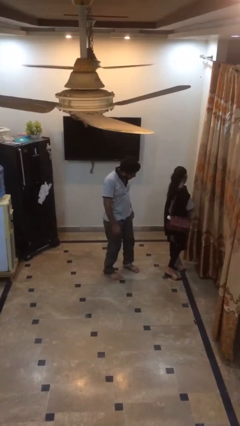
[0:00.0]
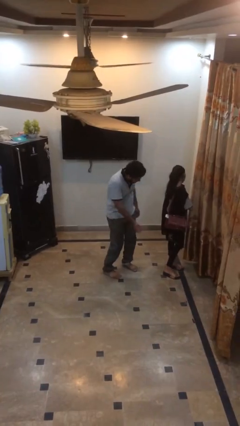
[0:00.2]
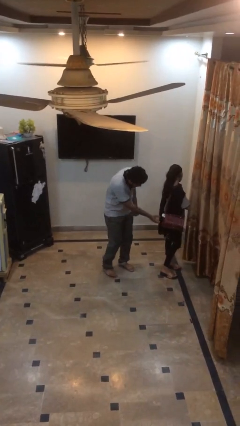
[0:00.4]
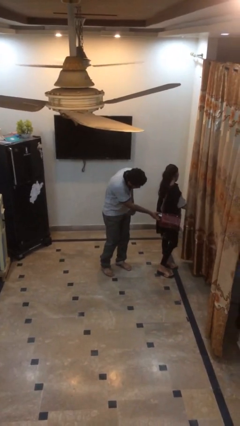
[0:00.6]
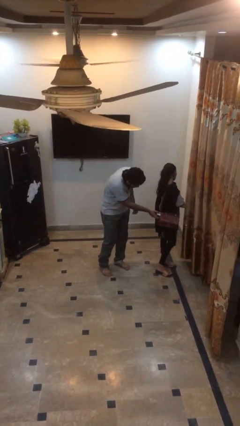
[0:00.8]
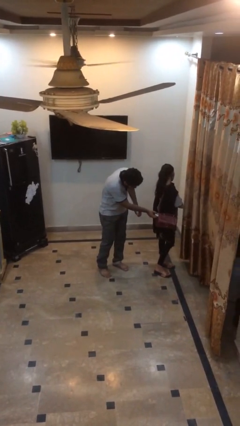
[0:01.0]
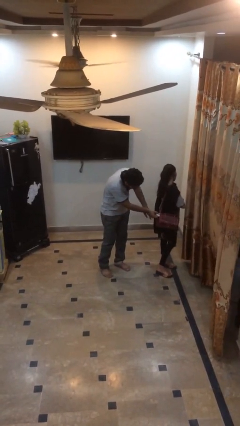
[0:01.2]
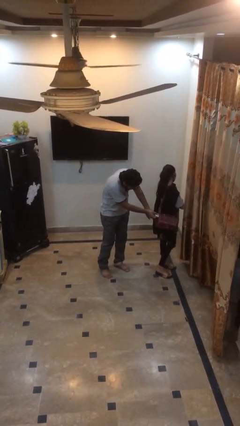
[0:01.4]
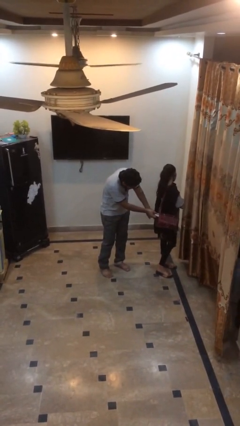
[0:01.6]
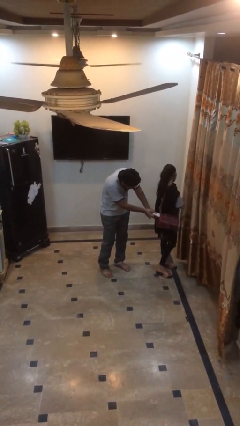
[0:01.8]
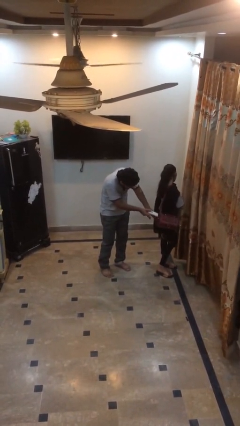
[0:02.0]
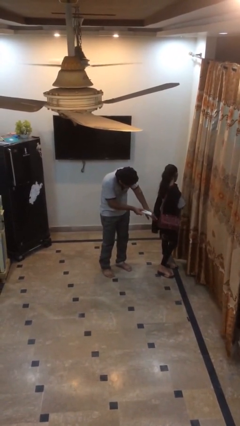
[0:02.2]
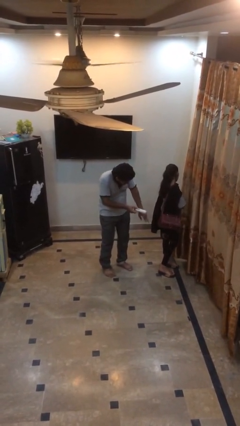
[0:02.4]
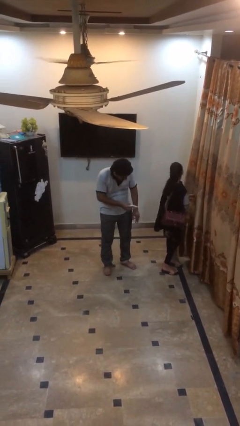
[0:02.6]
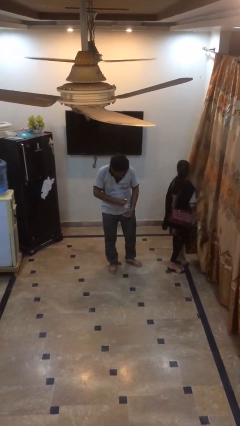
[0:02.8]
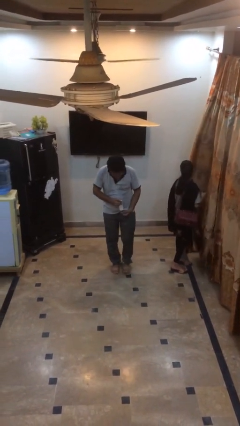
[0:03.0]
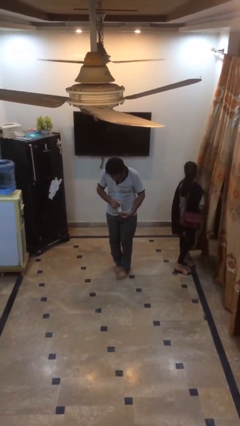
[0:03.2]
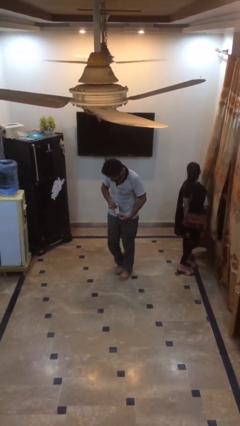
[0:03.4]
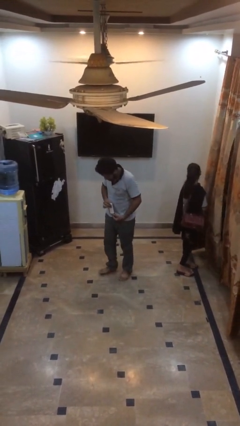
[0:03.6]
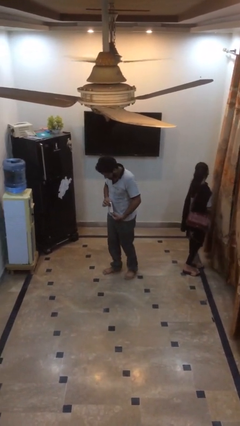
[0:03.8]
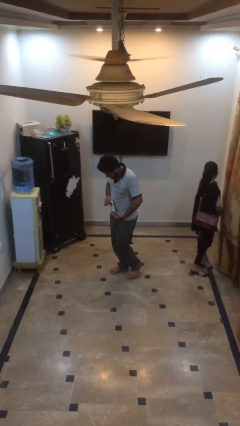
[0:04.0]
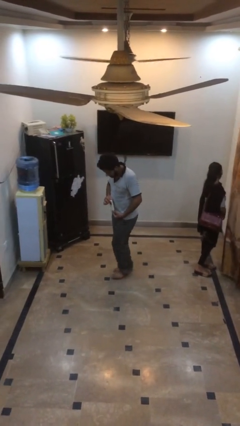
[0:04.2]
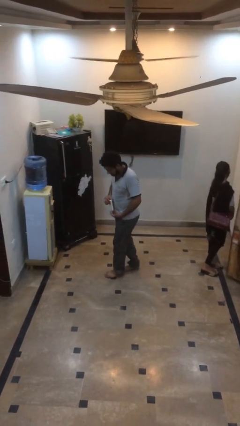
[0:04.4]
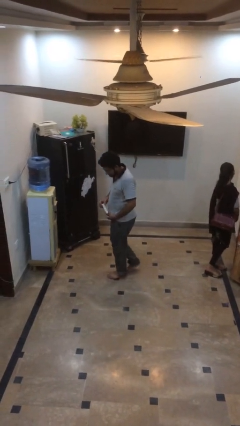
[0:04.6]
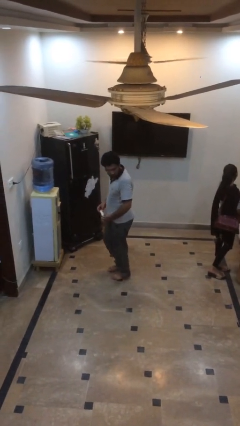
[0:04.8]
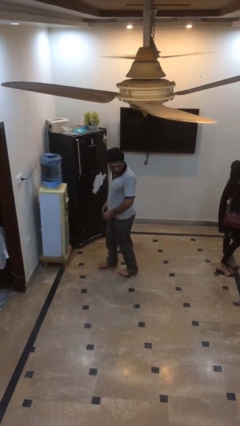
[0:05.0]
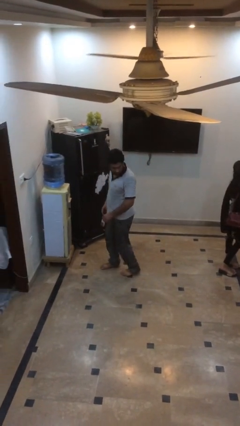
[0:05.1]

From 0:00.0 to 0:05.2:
person steals object from person

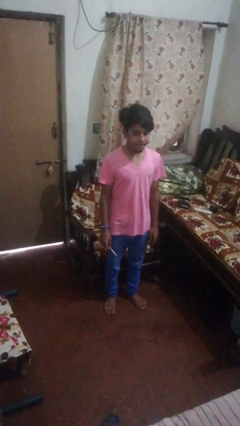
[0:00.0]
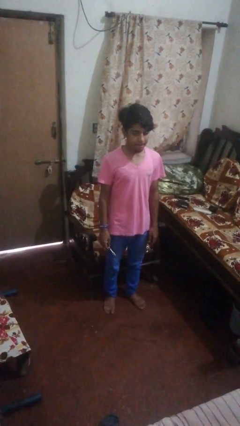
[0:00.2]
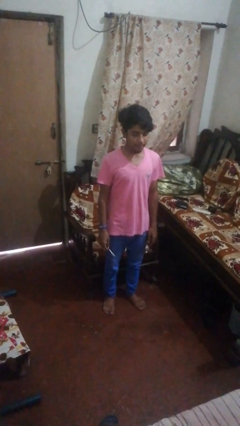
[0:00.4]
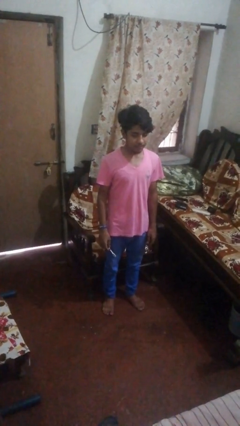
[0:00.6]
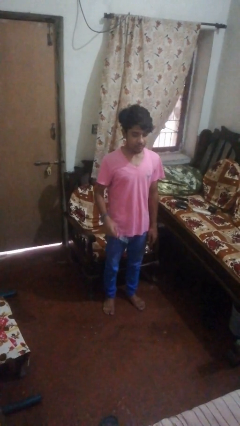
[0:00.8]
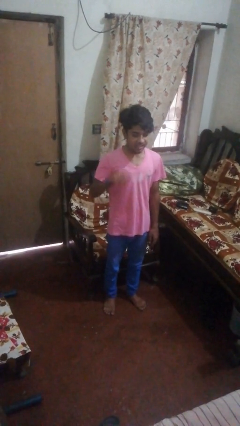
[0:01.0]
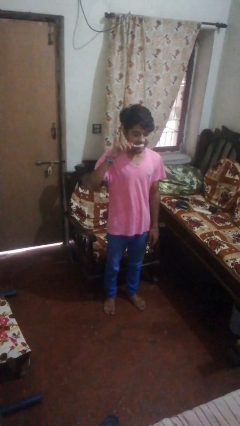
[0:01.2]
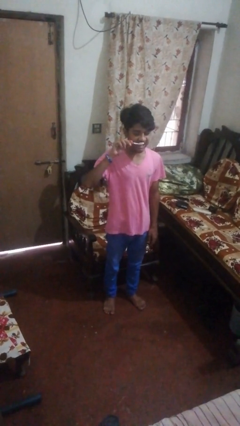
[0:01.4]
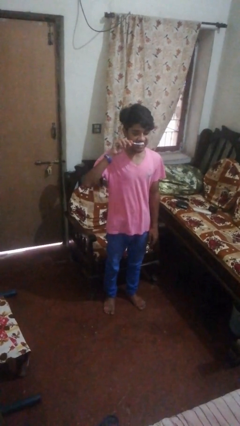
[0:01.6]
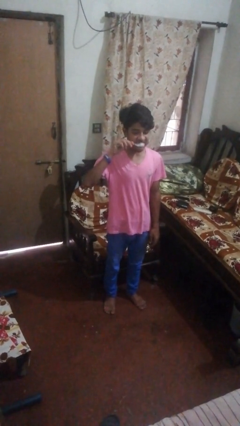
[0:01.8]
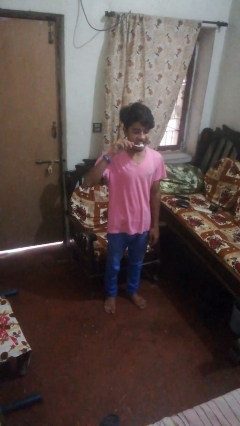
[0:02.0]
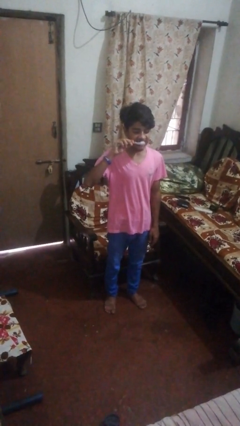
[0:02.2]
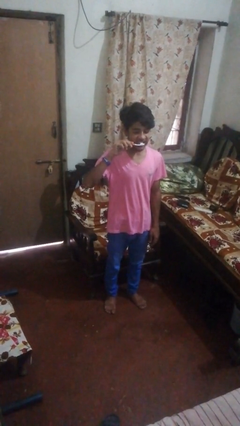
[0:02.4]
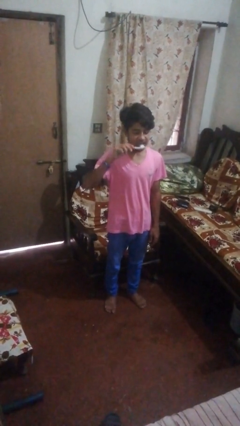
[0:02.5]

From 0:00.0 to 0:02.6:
person brushes teeth

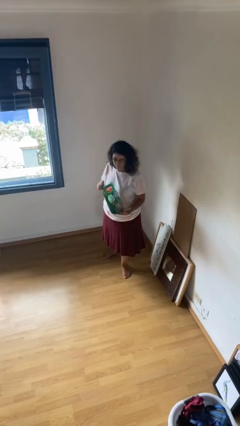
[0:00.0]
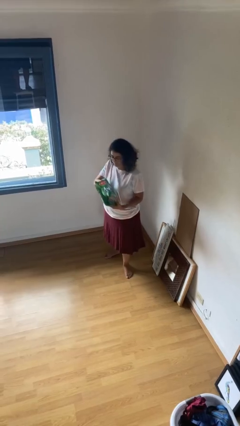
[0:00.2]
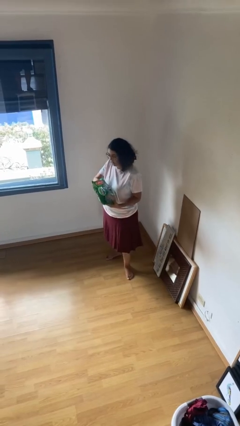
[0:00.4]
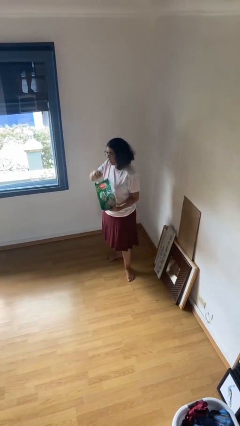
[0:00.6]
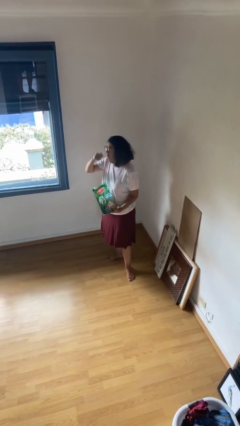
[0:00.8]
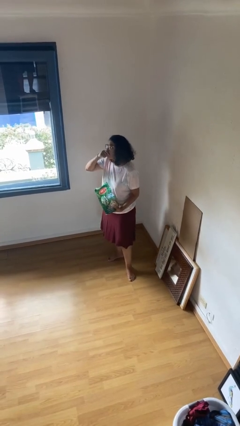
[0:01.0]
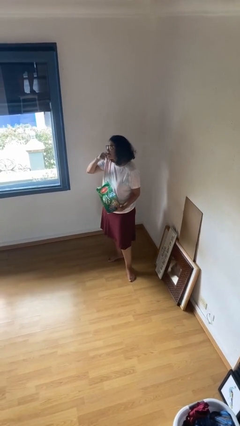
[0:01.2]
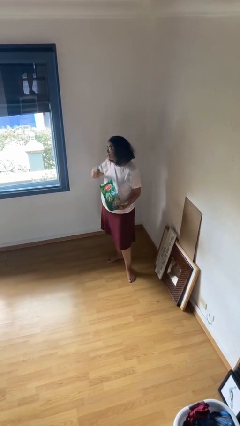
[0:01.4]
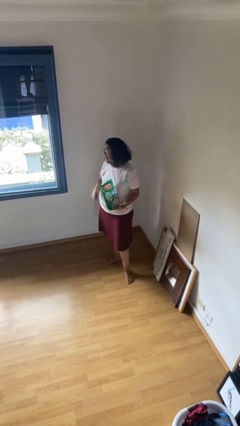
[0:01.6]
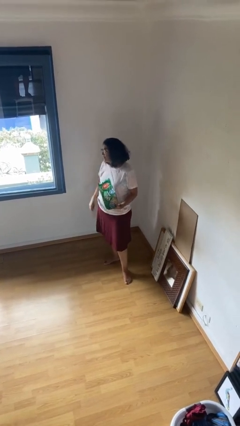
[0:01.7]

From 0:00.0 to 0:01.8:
person eats snack from bag

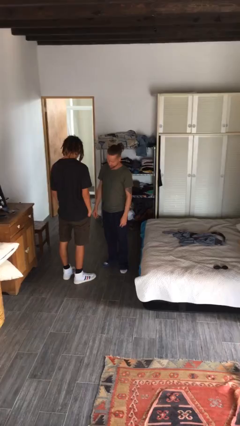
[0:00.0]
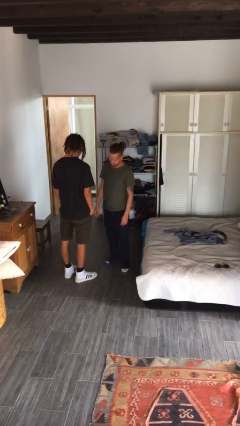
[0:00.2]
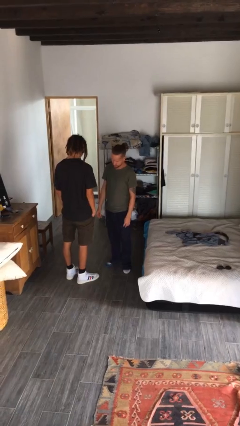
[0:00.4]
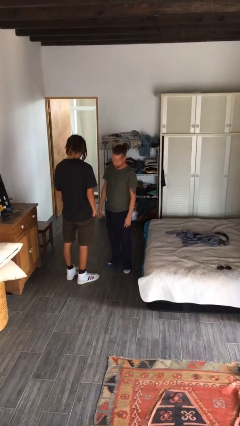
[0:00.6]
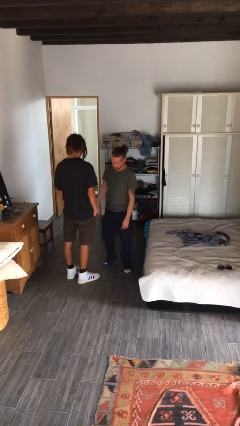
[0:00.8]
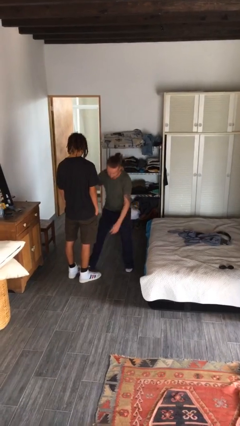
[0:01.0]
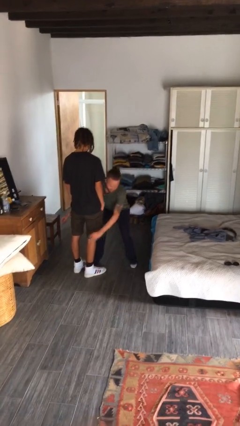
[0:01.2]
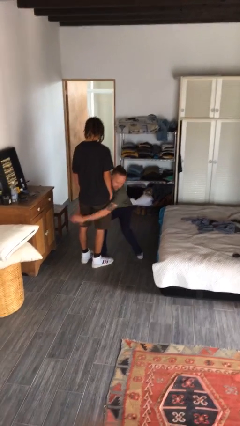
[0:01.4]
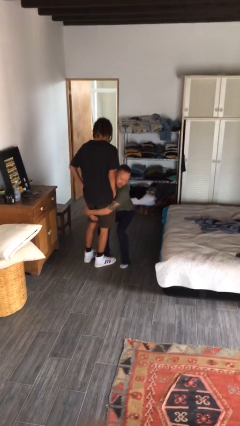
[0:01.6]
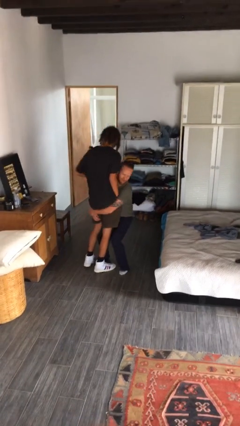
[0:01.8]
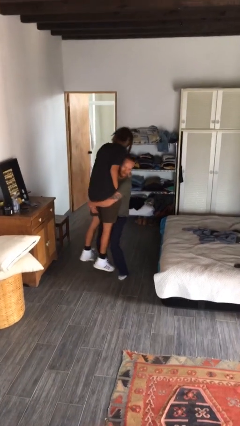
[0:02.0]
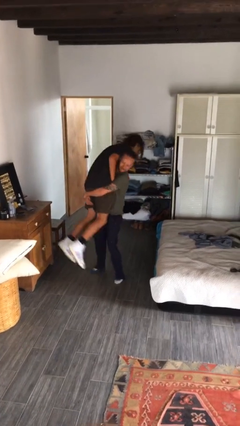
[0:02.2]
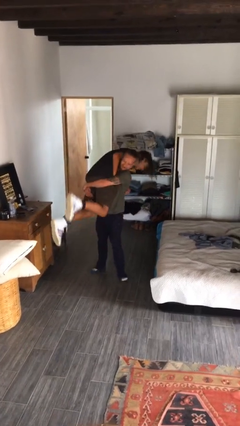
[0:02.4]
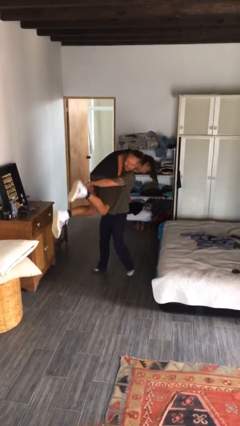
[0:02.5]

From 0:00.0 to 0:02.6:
person picks up person

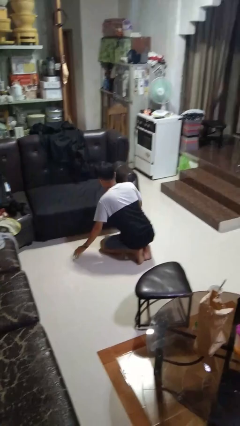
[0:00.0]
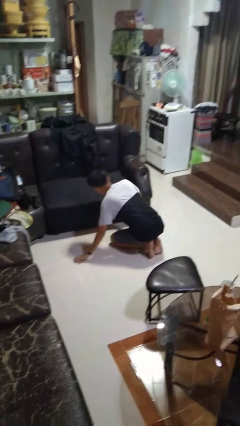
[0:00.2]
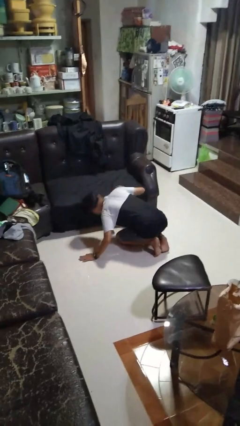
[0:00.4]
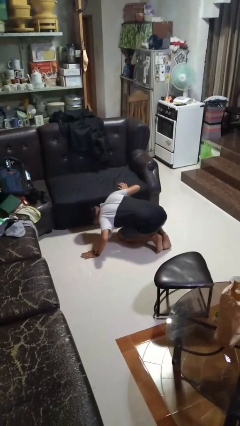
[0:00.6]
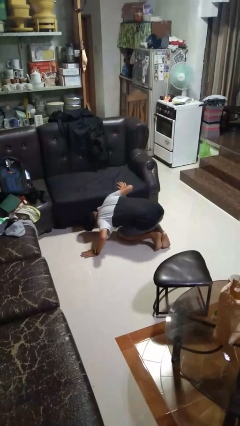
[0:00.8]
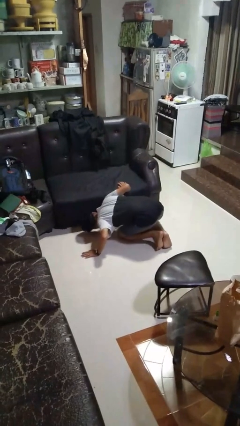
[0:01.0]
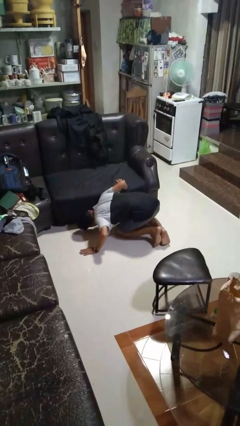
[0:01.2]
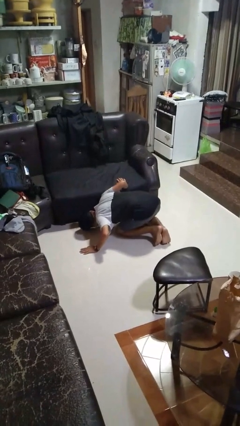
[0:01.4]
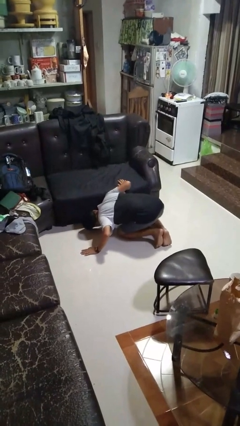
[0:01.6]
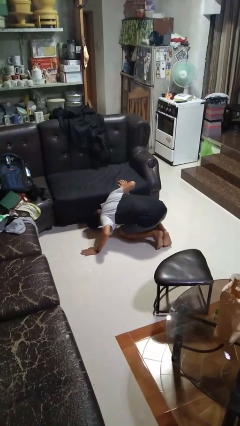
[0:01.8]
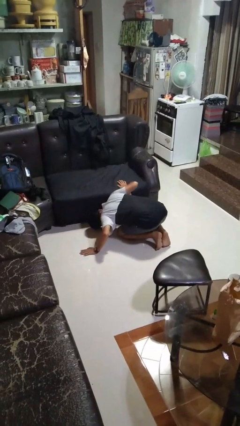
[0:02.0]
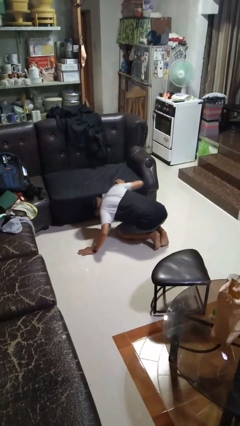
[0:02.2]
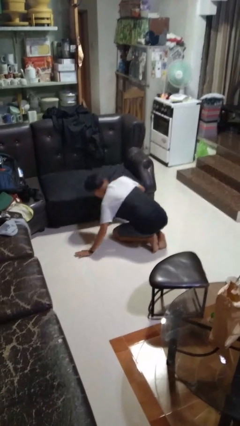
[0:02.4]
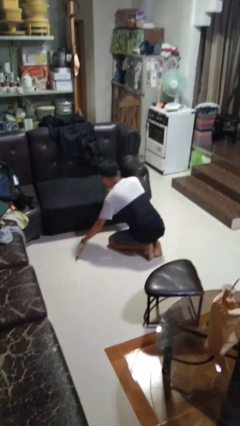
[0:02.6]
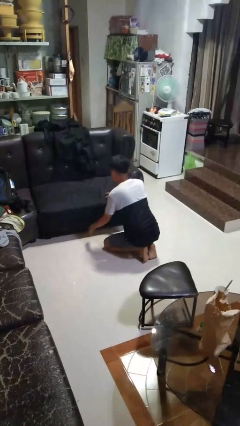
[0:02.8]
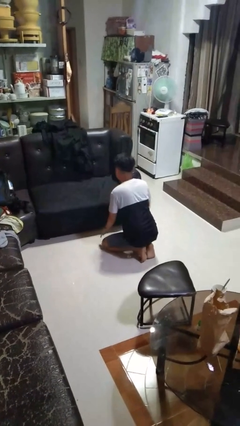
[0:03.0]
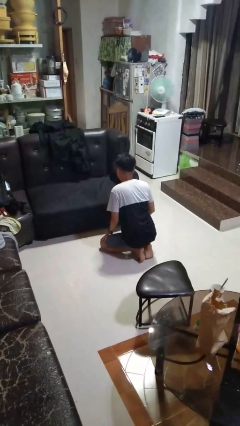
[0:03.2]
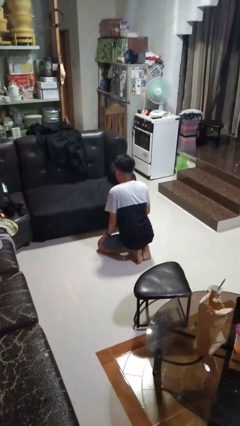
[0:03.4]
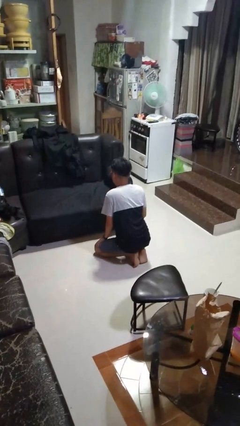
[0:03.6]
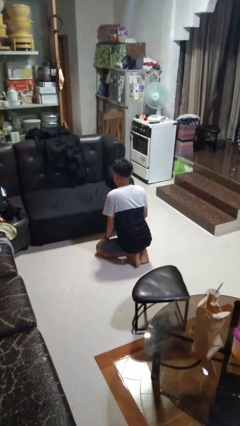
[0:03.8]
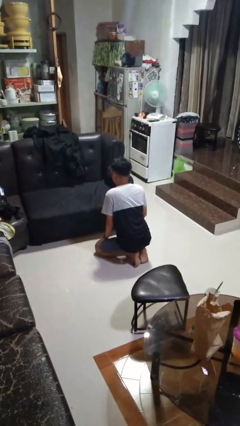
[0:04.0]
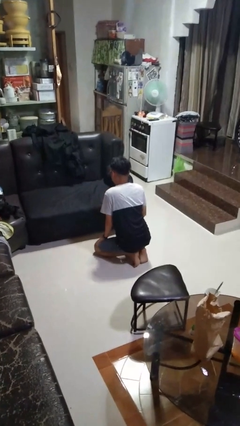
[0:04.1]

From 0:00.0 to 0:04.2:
person searches under couch

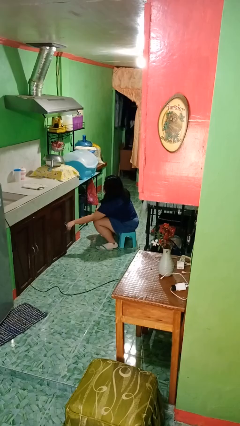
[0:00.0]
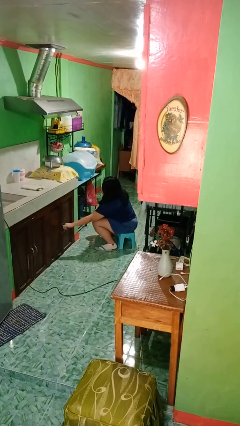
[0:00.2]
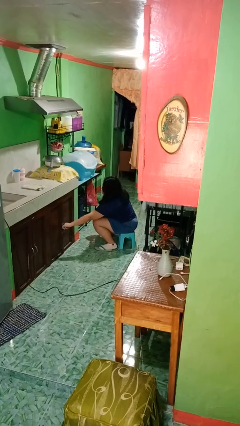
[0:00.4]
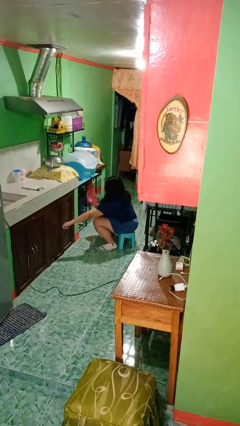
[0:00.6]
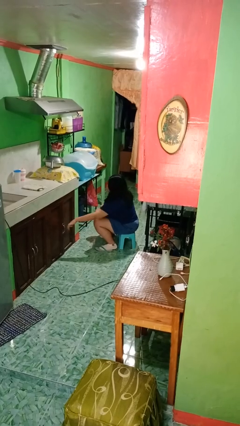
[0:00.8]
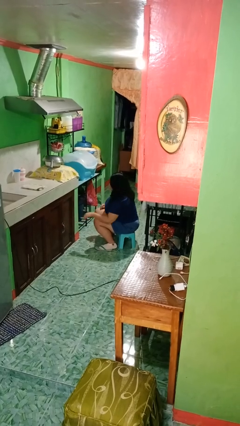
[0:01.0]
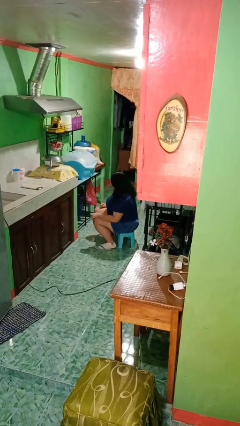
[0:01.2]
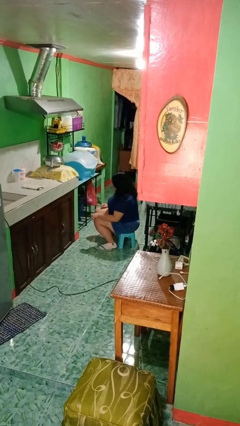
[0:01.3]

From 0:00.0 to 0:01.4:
person closes cabinet
